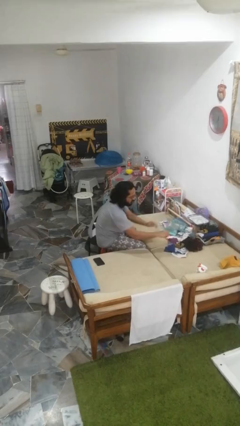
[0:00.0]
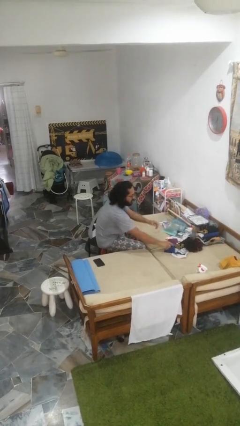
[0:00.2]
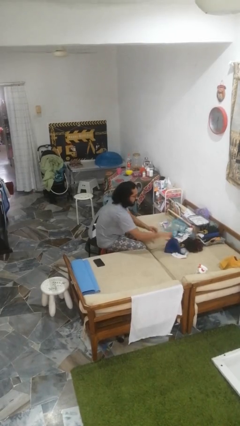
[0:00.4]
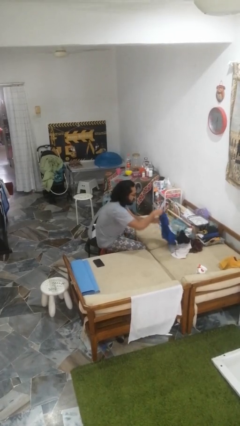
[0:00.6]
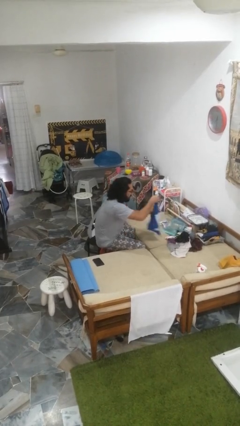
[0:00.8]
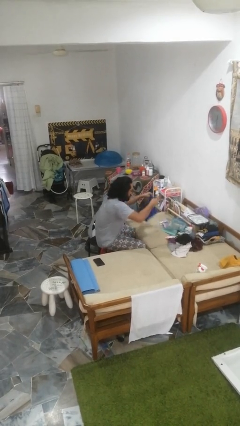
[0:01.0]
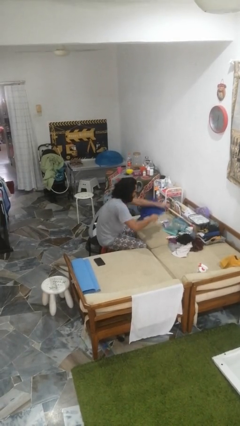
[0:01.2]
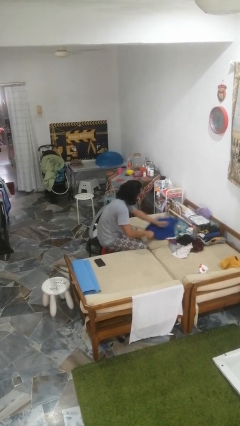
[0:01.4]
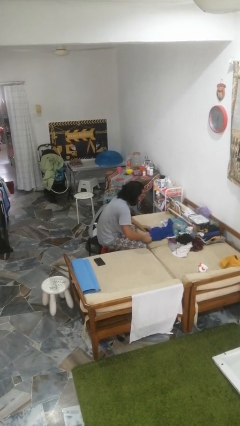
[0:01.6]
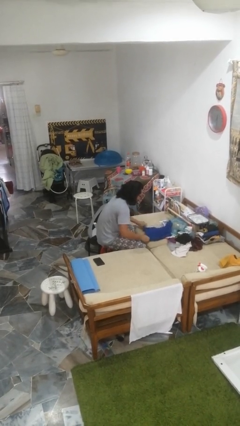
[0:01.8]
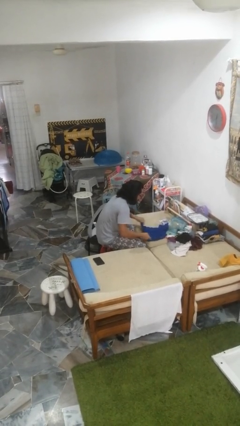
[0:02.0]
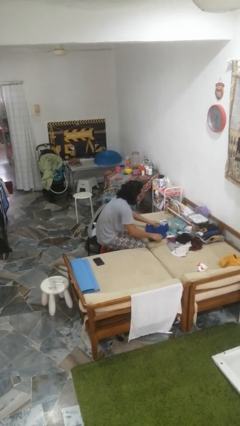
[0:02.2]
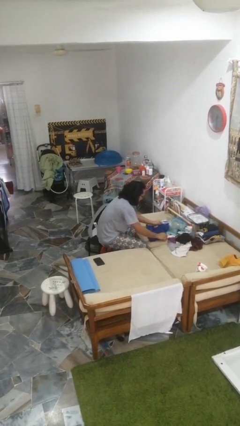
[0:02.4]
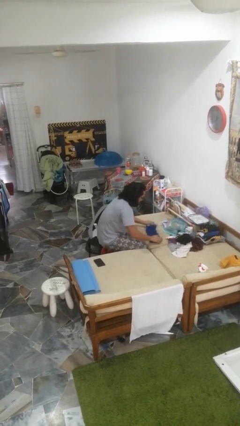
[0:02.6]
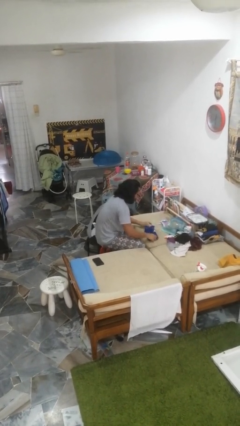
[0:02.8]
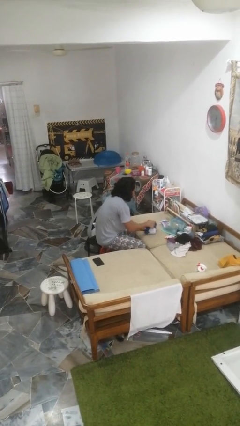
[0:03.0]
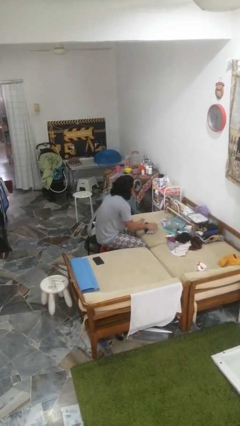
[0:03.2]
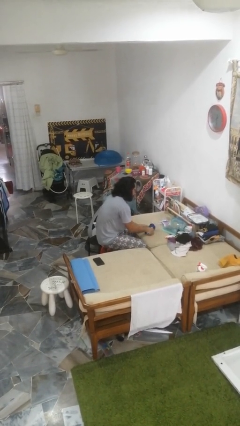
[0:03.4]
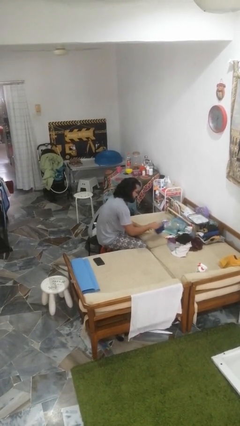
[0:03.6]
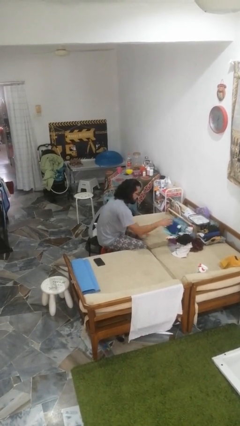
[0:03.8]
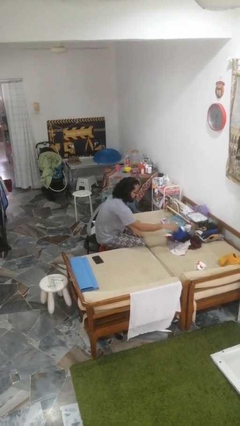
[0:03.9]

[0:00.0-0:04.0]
person folds shirt

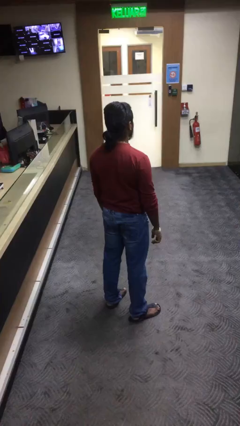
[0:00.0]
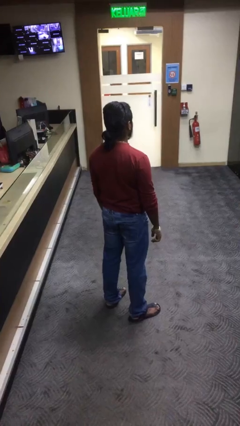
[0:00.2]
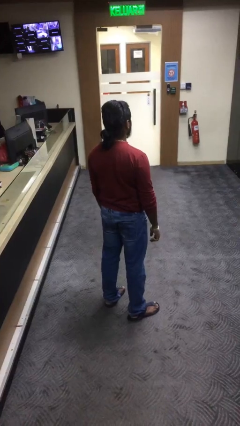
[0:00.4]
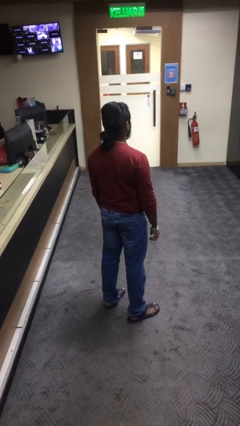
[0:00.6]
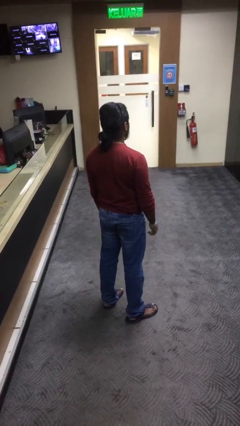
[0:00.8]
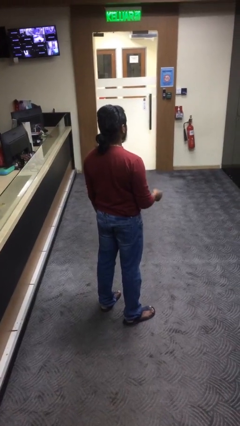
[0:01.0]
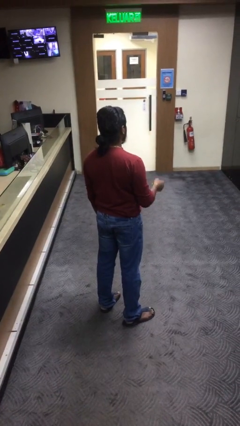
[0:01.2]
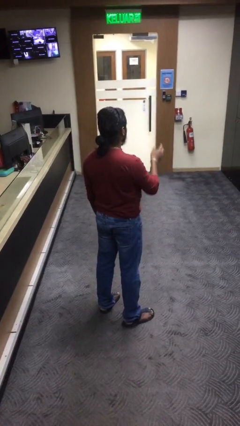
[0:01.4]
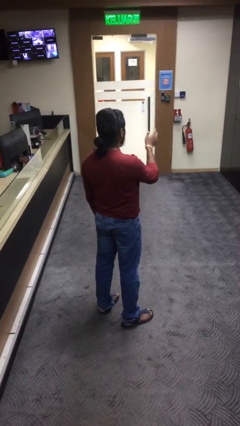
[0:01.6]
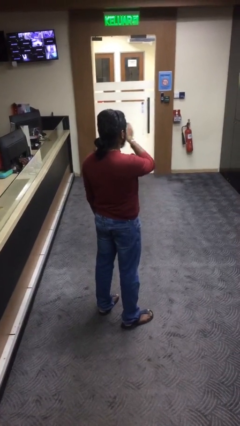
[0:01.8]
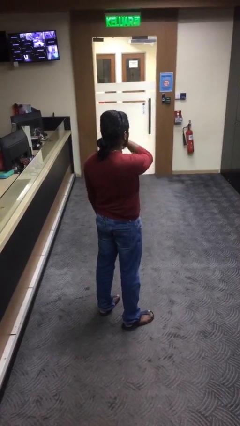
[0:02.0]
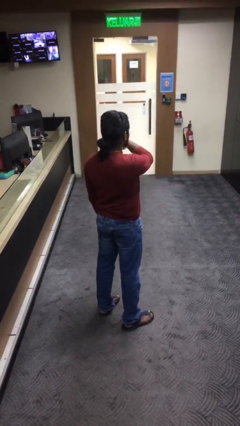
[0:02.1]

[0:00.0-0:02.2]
person gestures swipe left

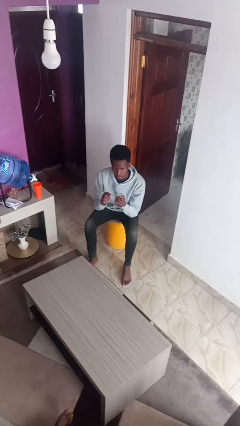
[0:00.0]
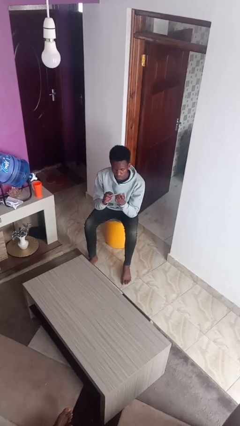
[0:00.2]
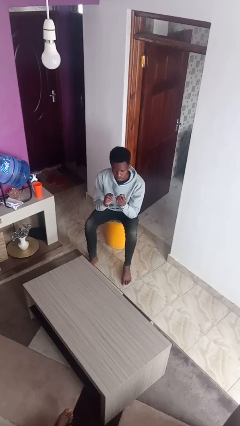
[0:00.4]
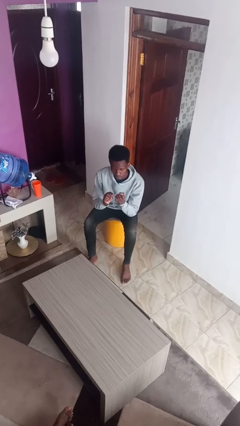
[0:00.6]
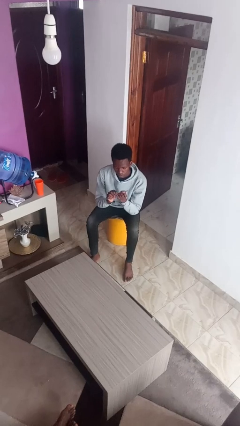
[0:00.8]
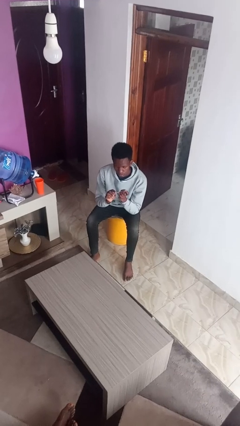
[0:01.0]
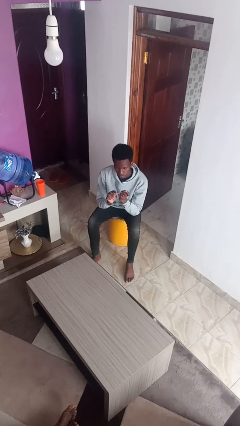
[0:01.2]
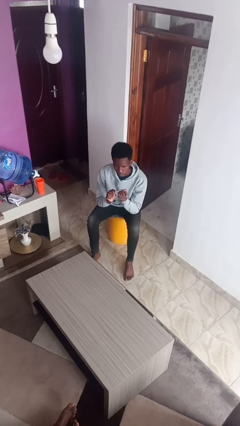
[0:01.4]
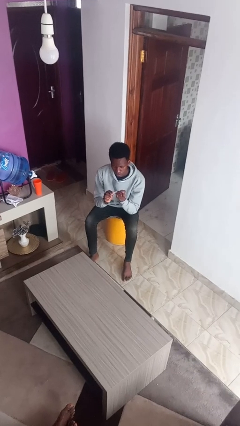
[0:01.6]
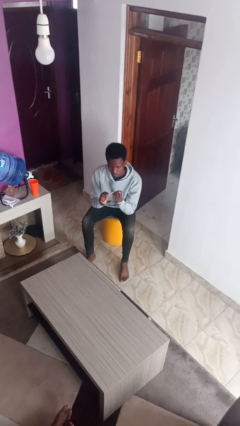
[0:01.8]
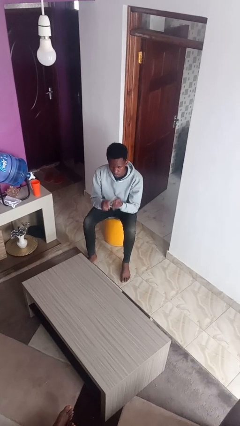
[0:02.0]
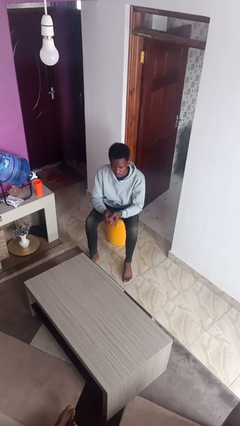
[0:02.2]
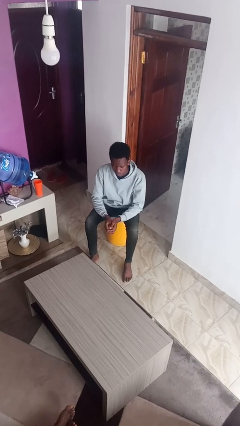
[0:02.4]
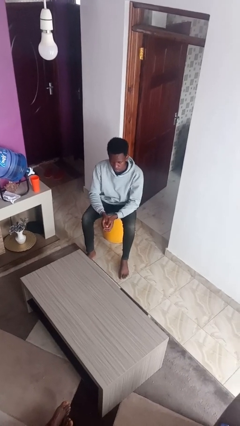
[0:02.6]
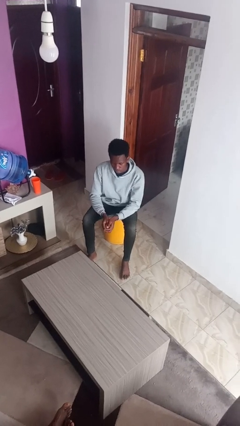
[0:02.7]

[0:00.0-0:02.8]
person files fingernails

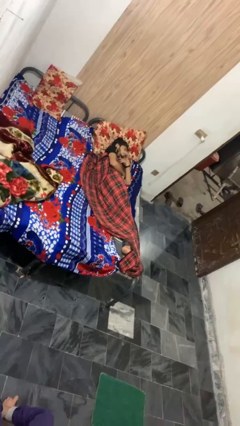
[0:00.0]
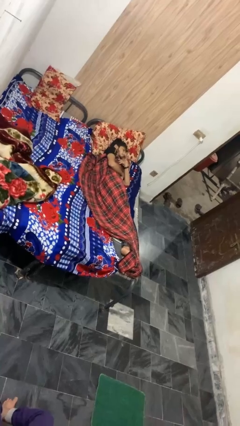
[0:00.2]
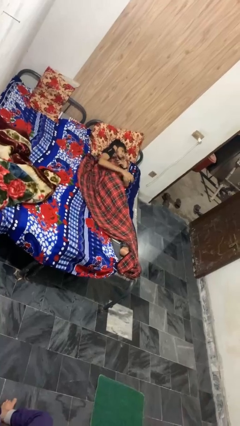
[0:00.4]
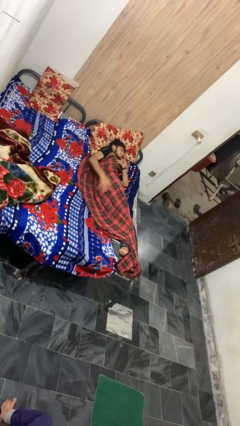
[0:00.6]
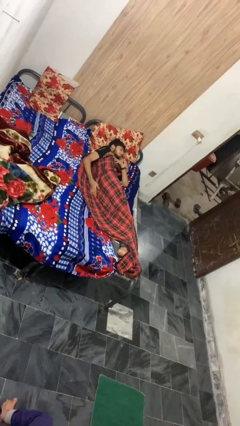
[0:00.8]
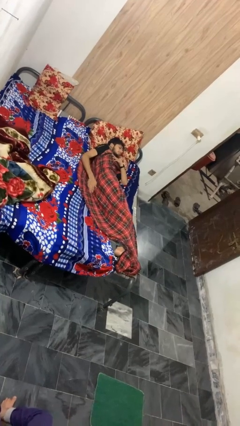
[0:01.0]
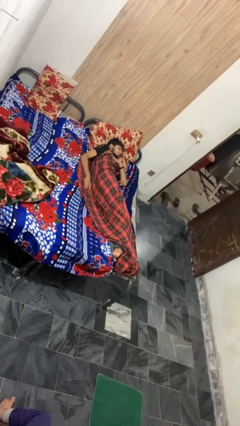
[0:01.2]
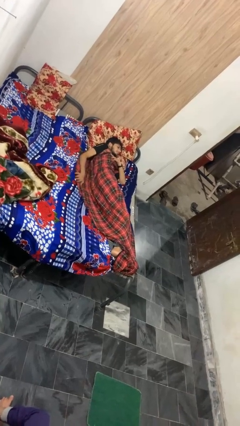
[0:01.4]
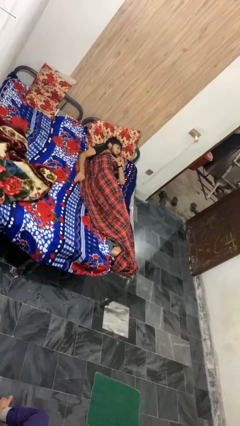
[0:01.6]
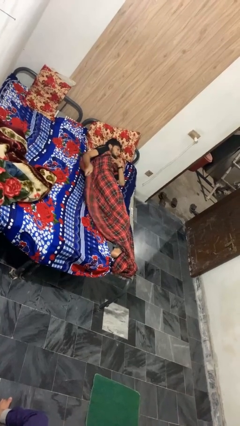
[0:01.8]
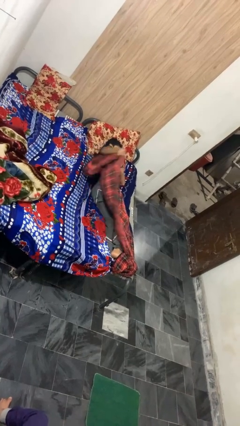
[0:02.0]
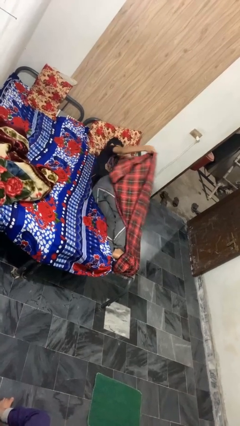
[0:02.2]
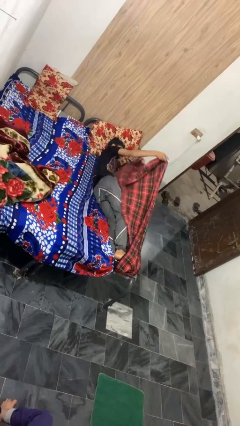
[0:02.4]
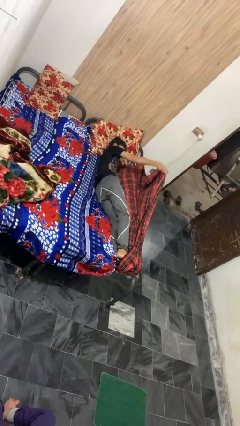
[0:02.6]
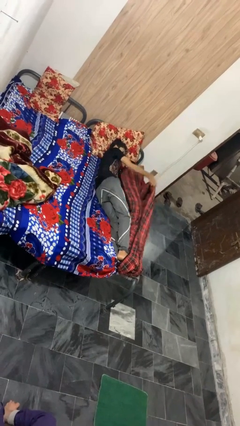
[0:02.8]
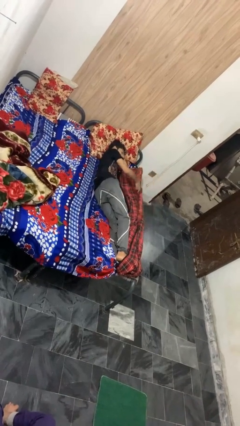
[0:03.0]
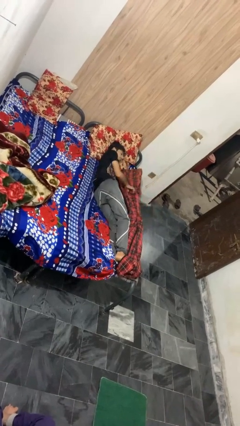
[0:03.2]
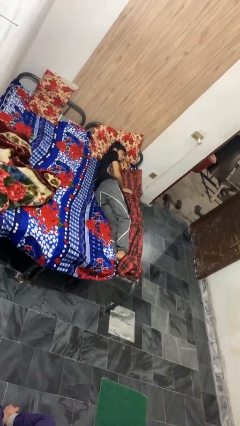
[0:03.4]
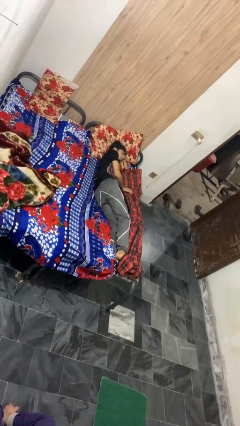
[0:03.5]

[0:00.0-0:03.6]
person uncovers with blanket

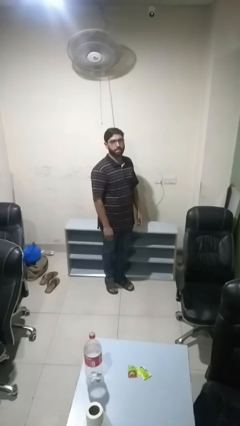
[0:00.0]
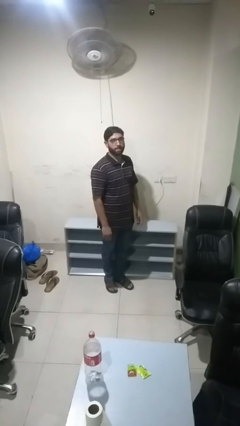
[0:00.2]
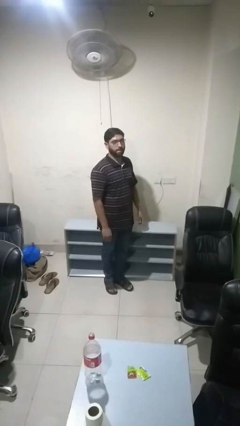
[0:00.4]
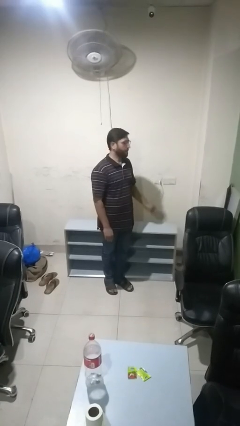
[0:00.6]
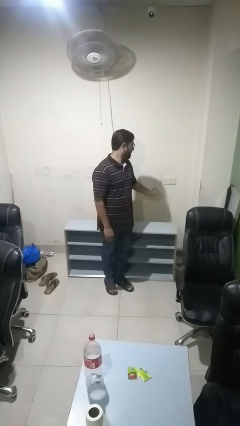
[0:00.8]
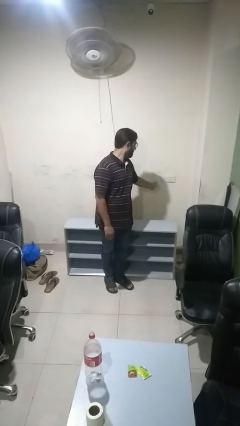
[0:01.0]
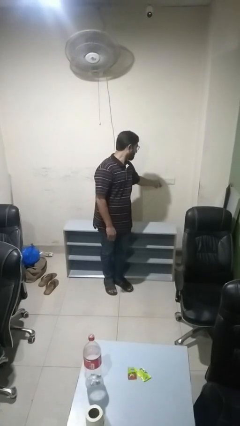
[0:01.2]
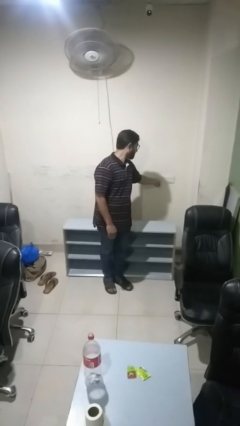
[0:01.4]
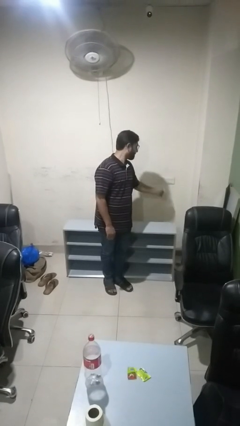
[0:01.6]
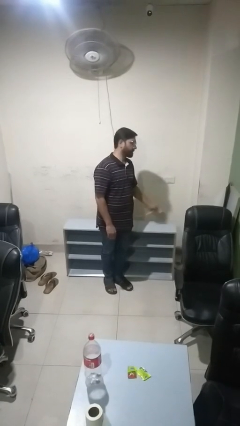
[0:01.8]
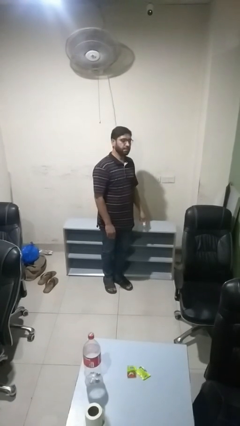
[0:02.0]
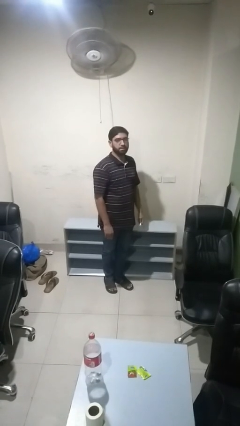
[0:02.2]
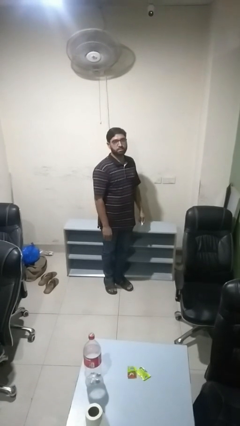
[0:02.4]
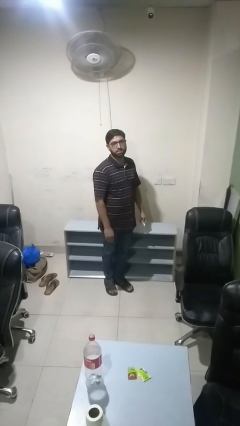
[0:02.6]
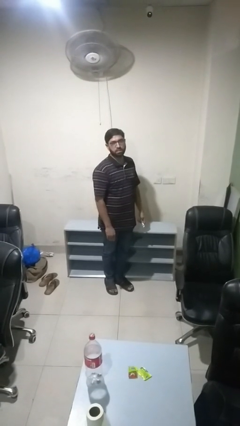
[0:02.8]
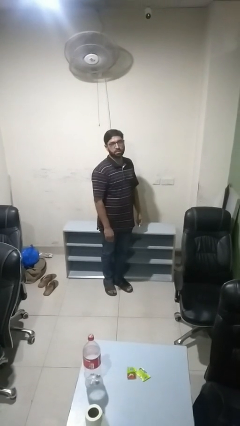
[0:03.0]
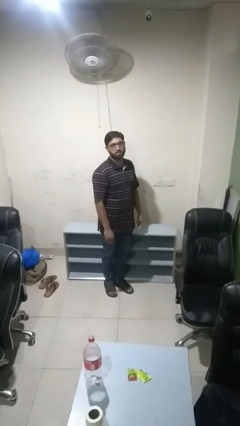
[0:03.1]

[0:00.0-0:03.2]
person unplugs from electrical socket

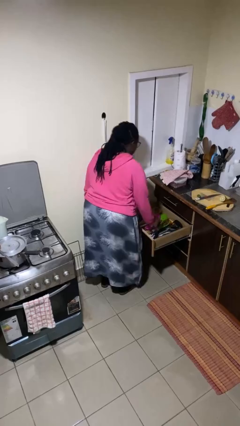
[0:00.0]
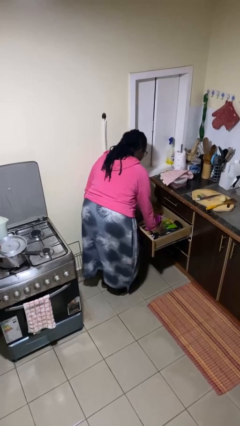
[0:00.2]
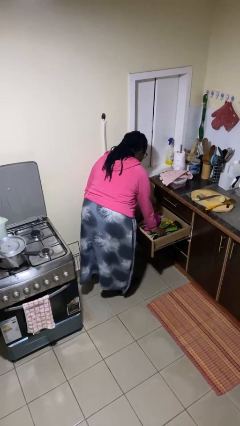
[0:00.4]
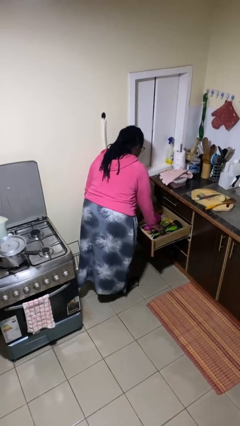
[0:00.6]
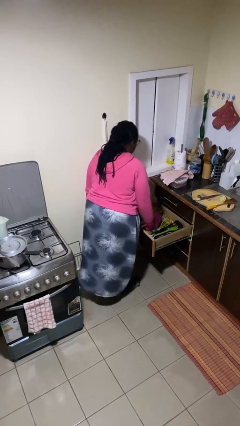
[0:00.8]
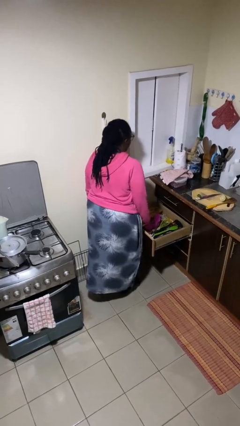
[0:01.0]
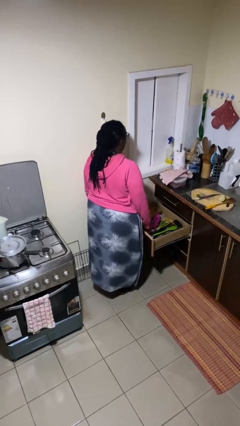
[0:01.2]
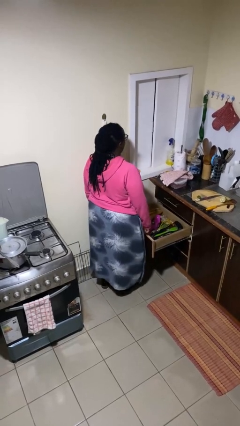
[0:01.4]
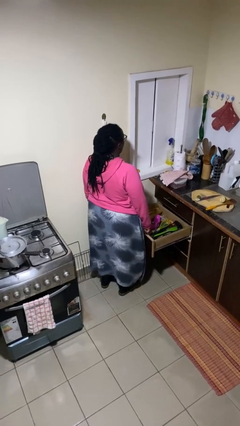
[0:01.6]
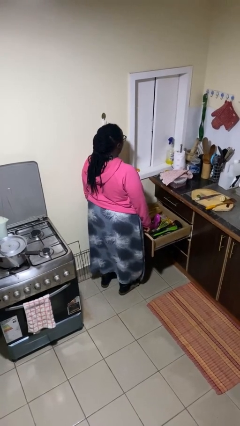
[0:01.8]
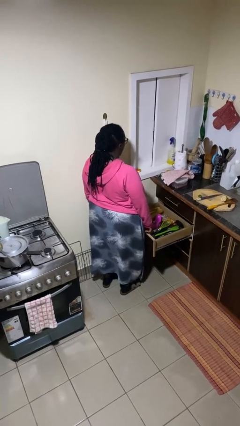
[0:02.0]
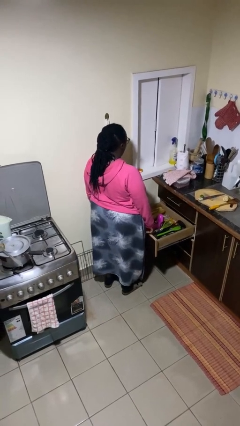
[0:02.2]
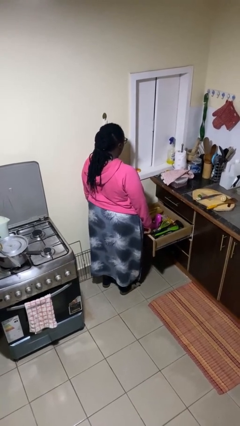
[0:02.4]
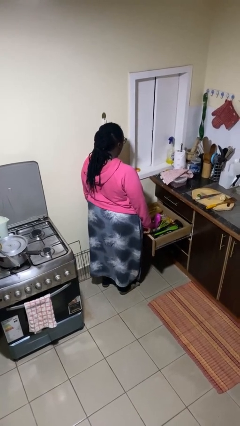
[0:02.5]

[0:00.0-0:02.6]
person puts object into kitchen drawer
